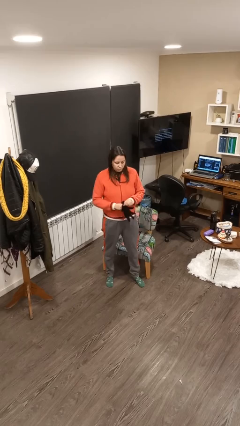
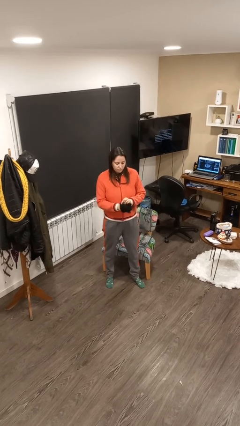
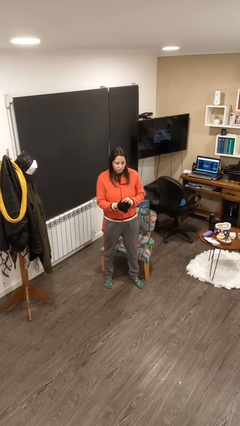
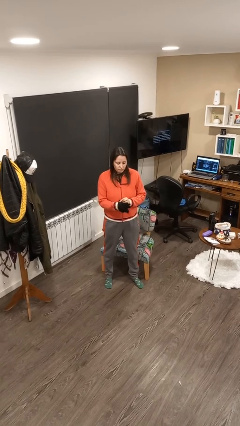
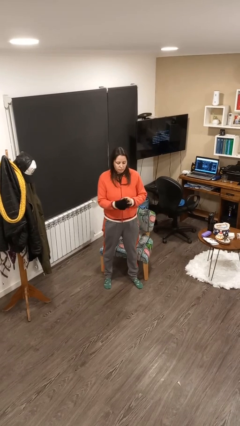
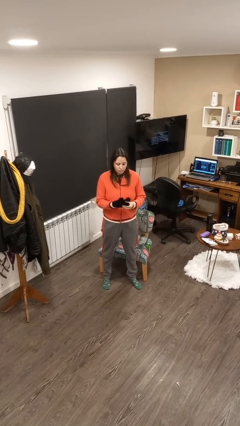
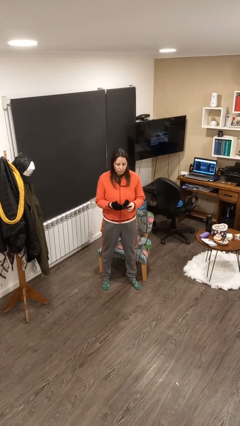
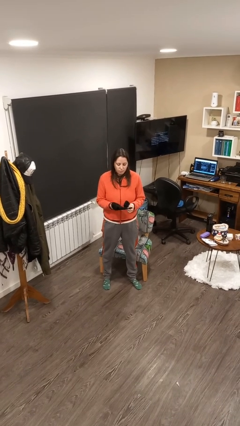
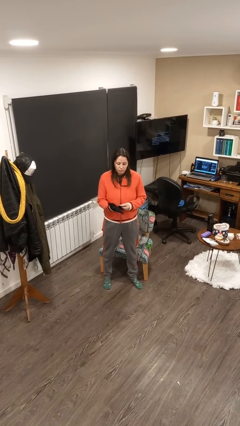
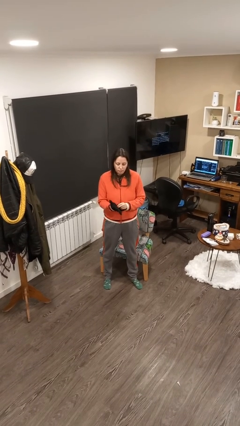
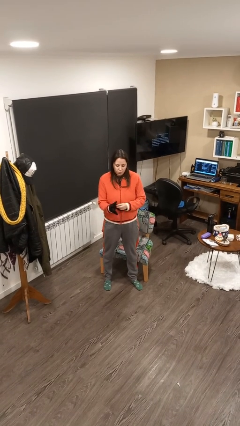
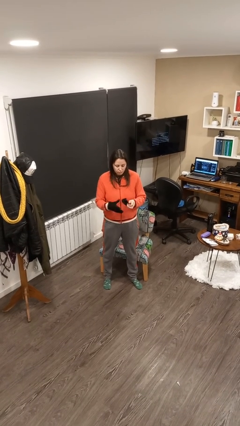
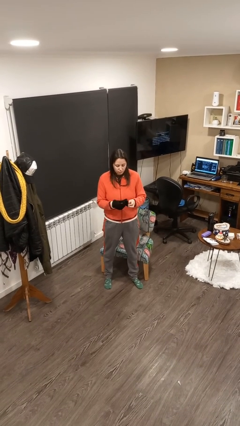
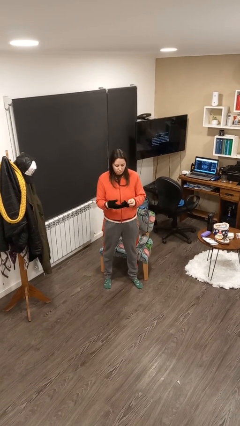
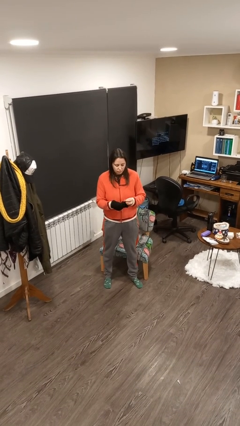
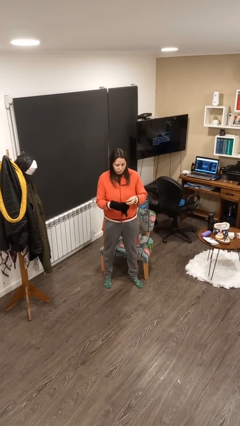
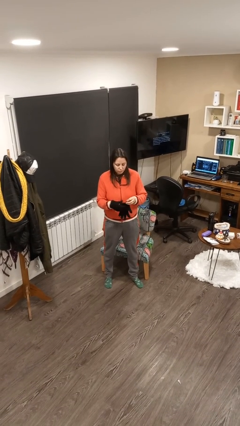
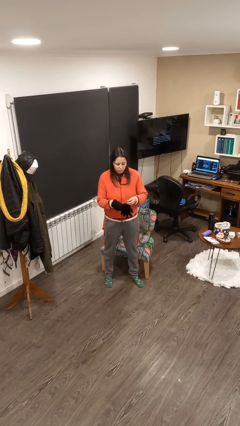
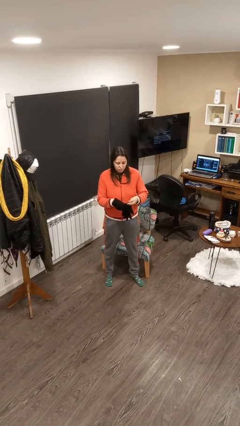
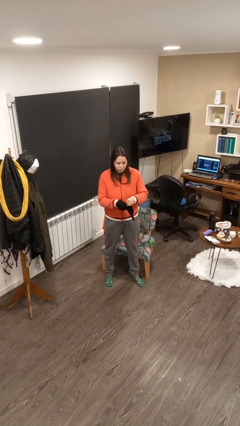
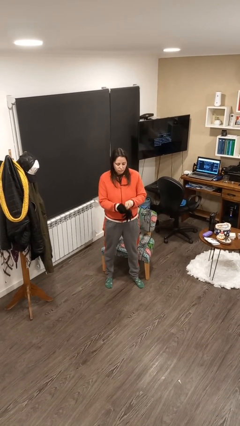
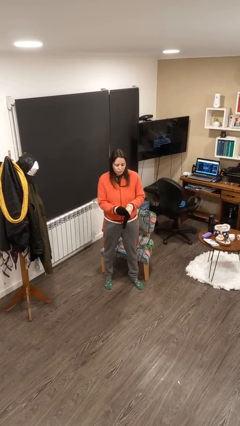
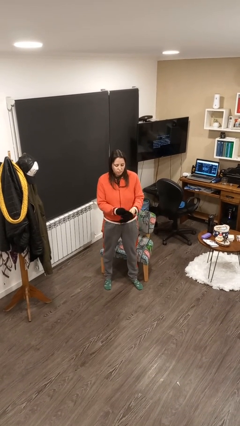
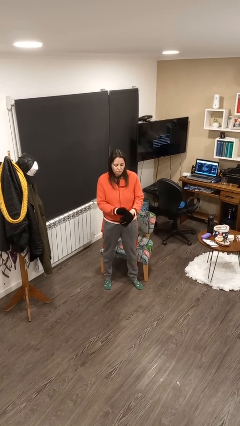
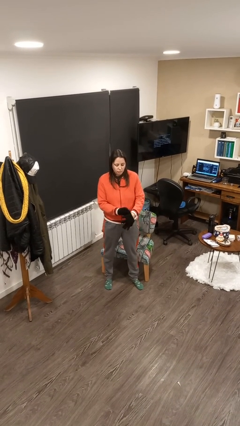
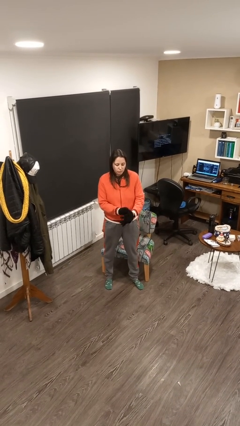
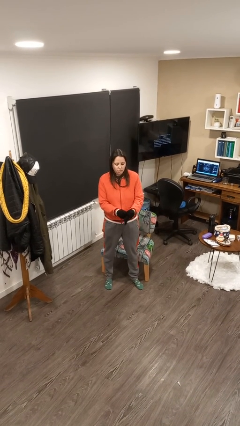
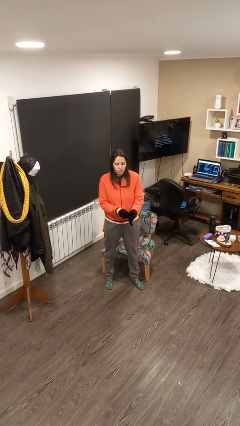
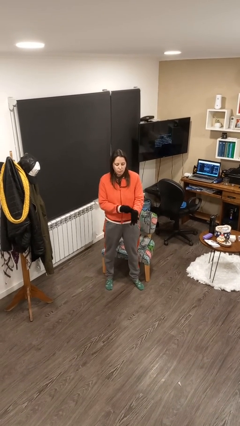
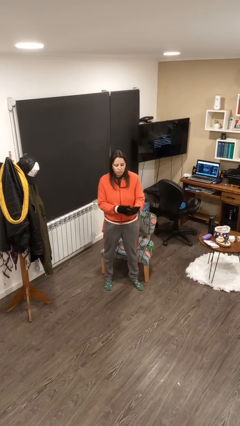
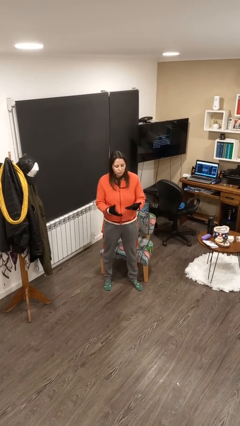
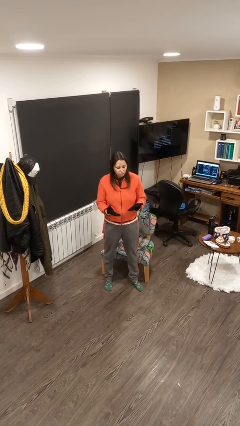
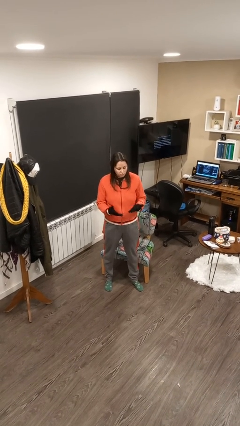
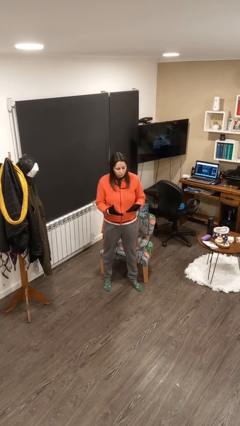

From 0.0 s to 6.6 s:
person puts on gloves

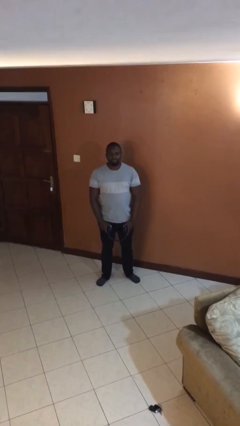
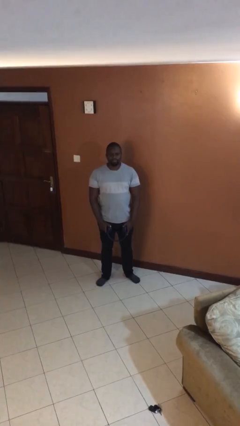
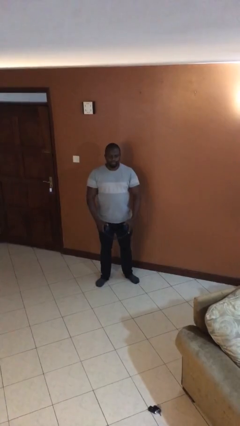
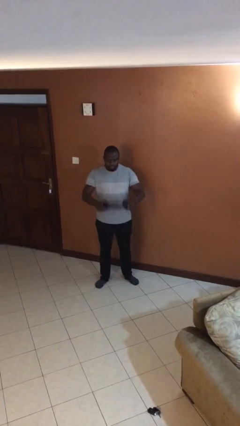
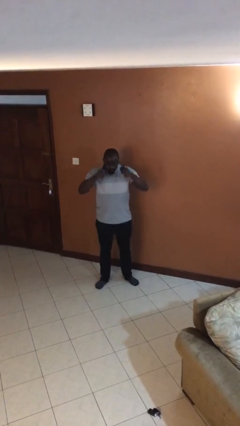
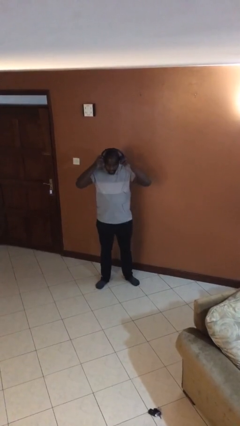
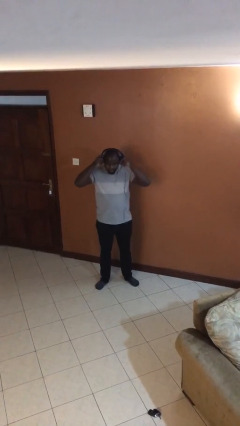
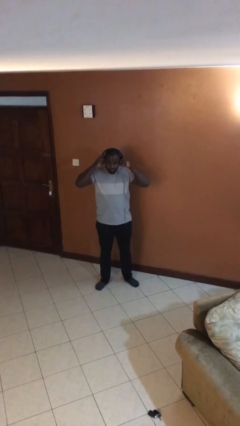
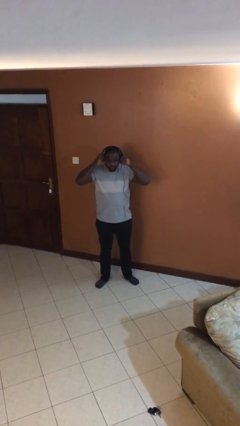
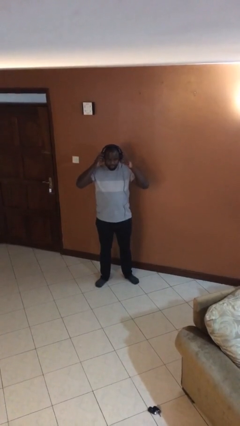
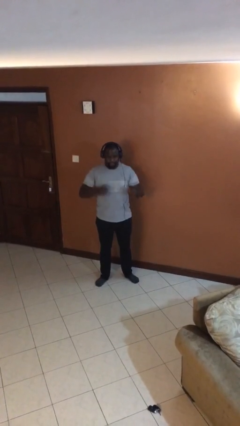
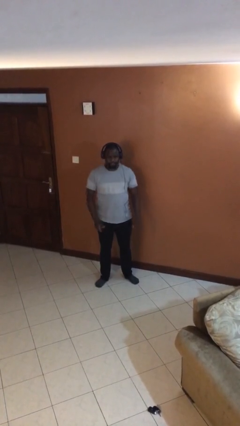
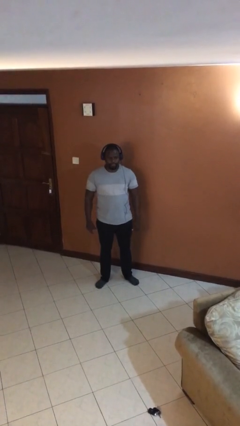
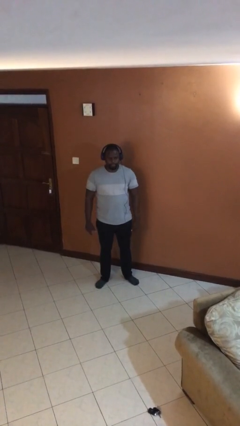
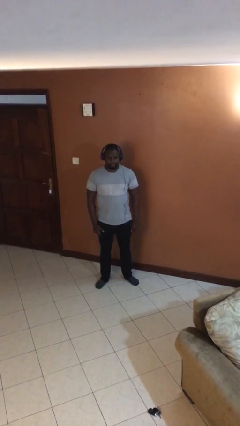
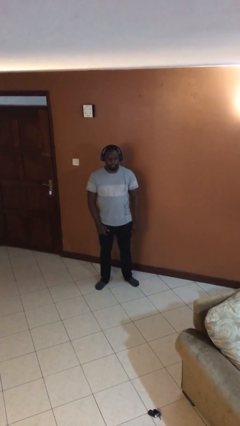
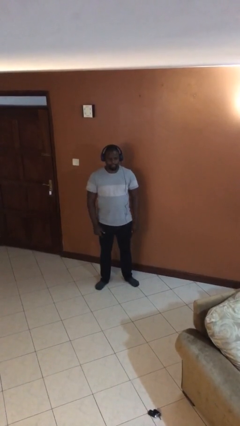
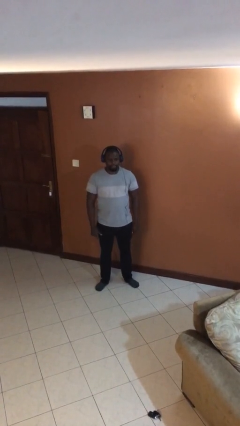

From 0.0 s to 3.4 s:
person puts on headphones

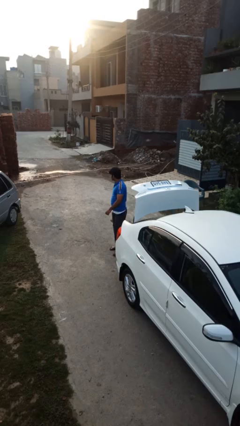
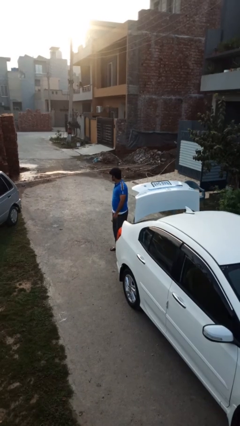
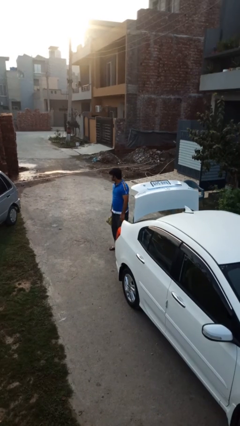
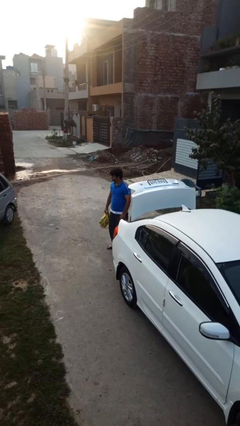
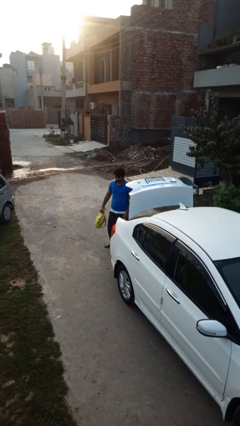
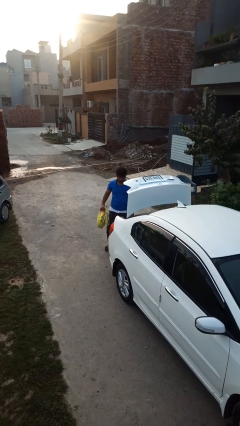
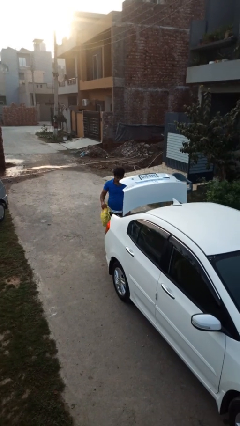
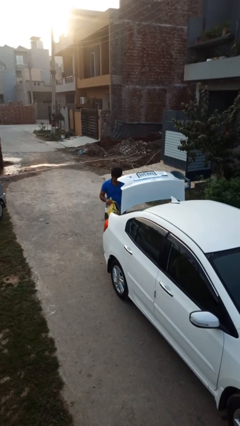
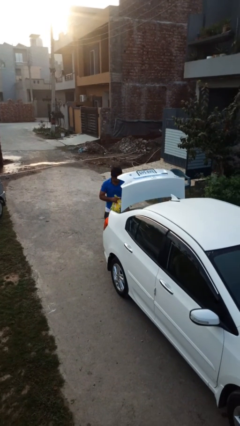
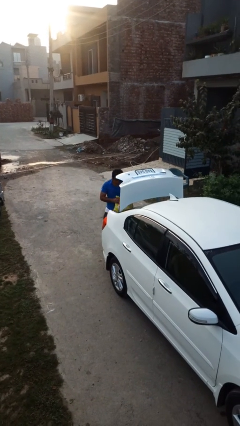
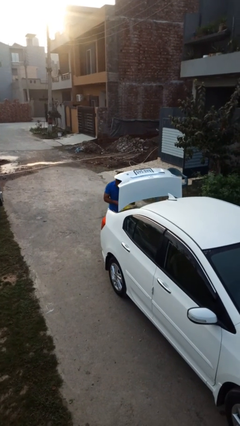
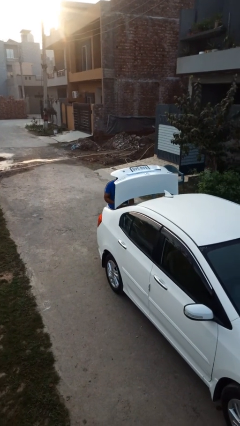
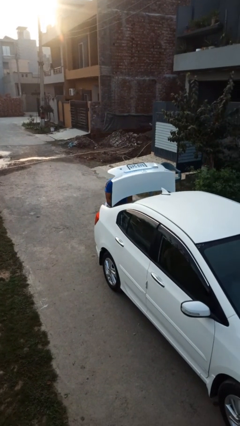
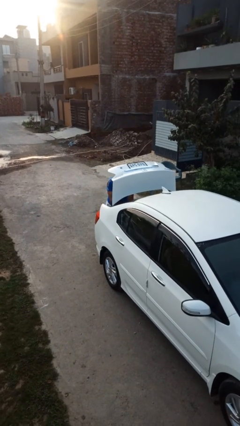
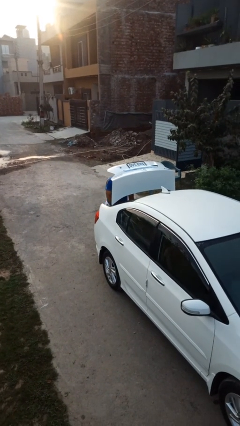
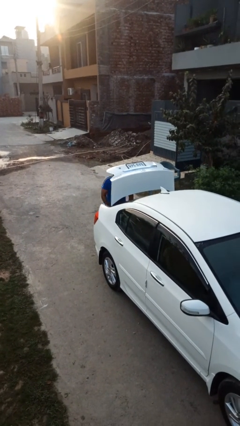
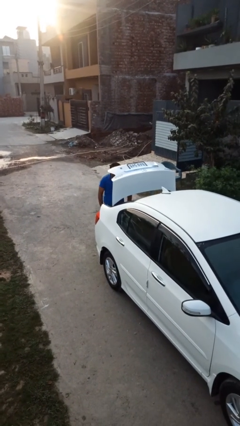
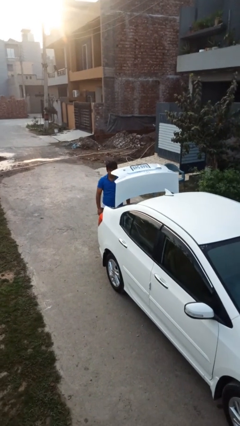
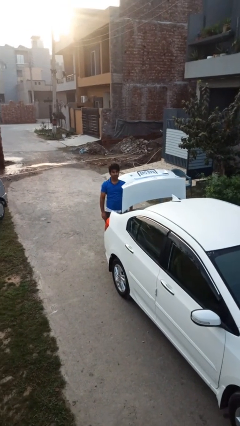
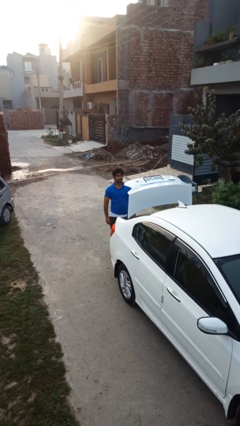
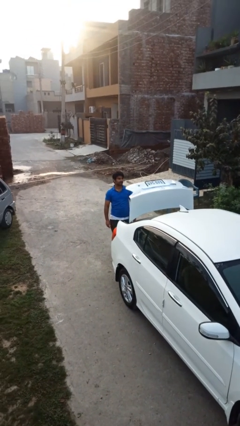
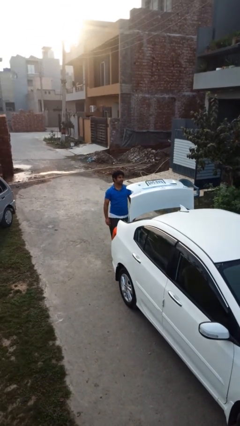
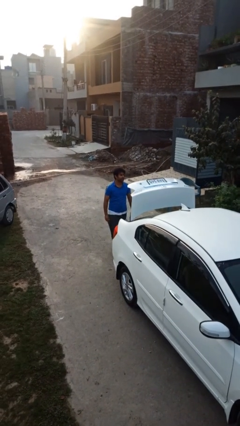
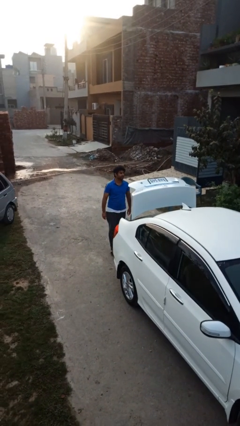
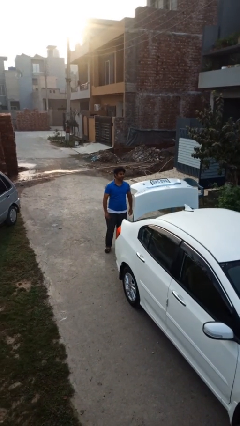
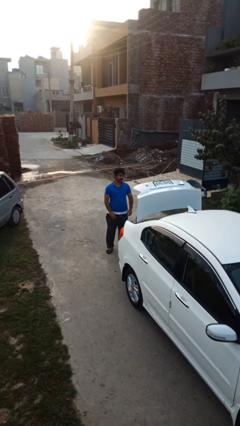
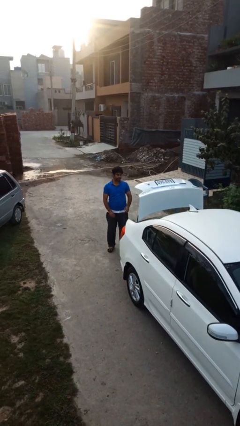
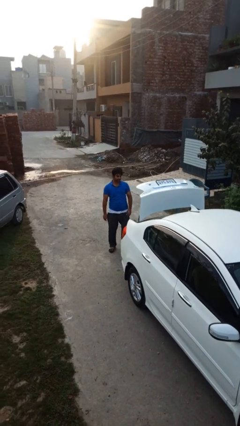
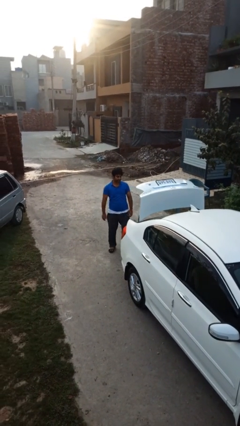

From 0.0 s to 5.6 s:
person loads car

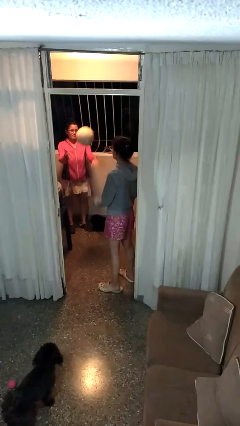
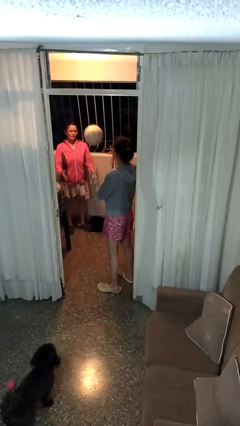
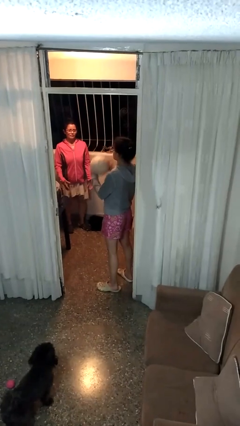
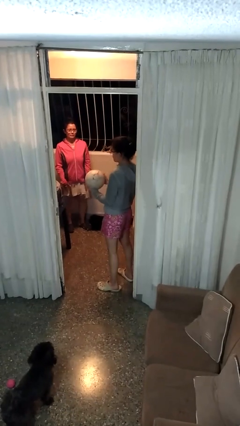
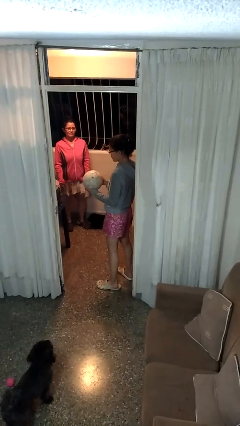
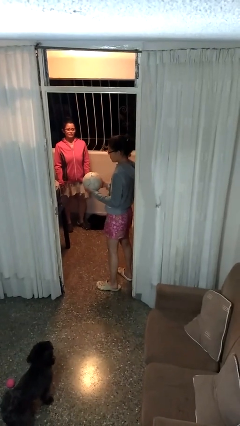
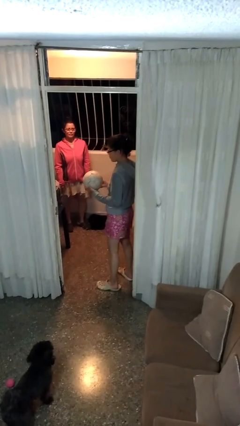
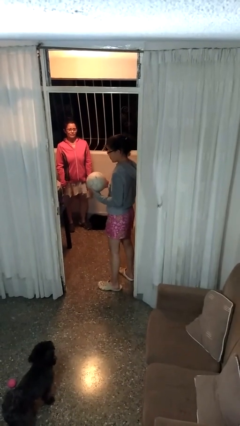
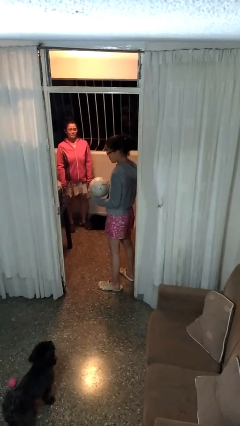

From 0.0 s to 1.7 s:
person catches object from person

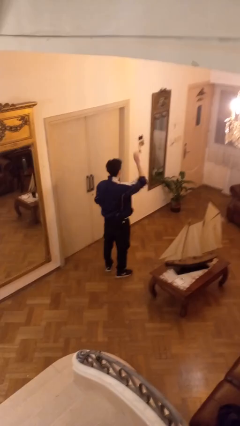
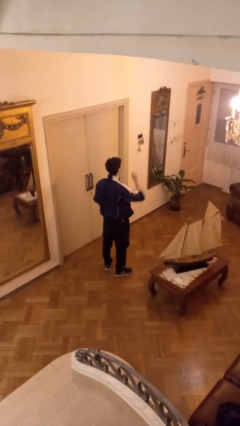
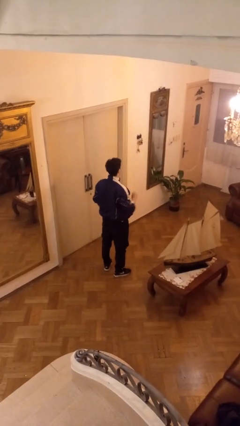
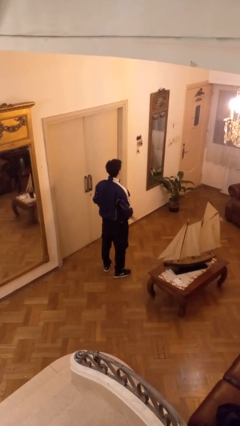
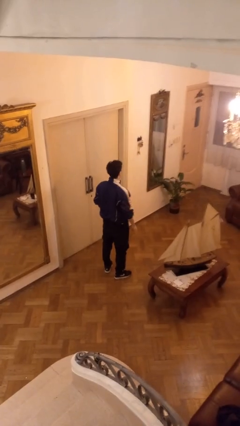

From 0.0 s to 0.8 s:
person gestures lower hand
